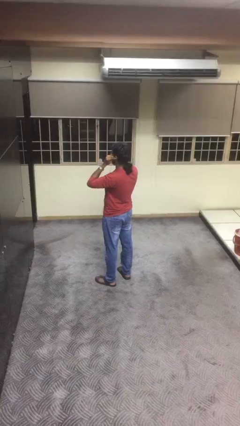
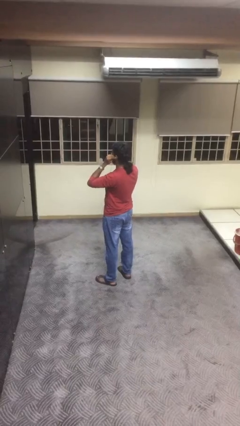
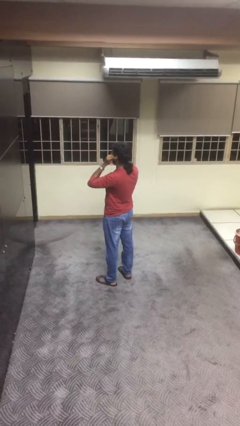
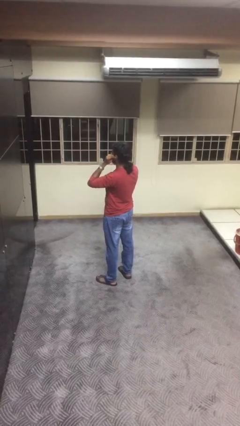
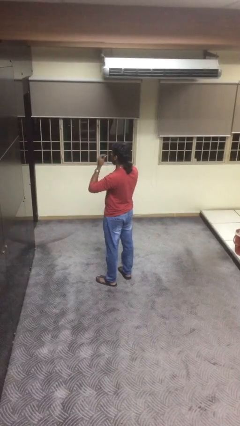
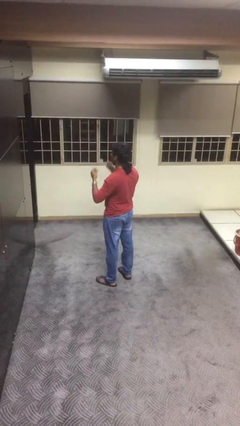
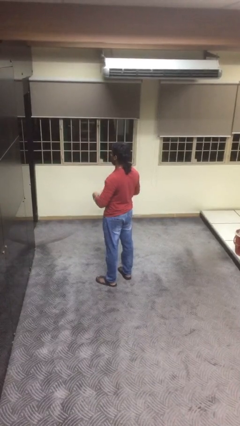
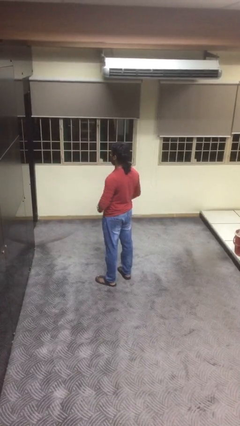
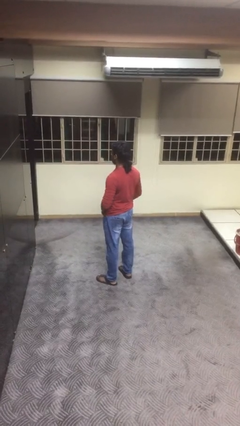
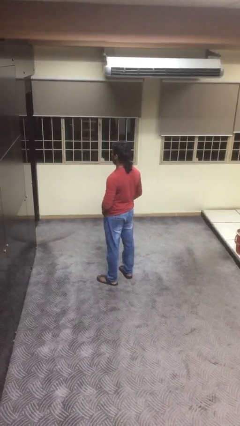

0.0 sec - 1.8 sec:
person takes off headphones

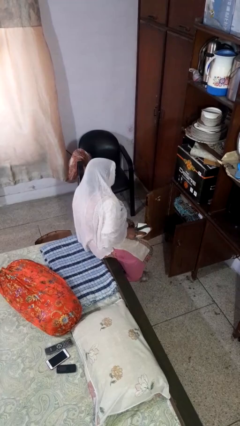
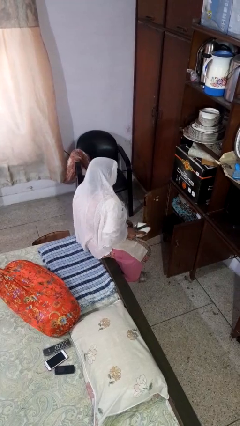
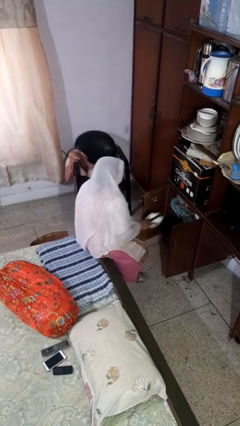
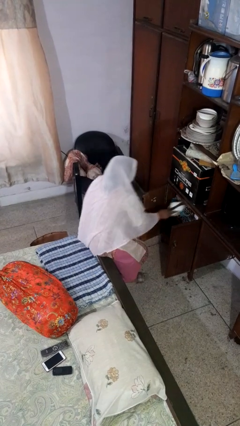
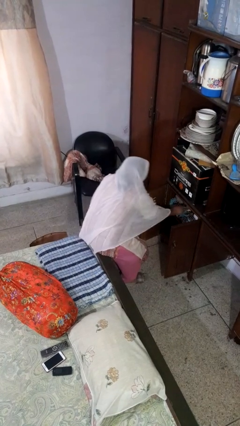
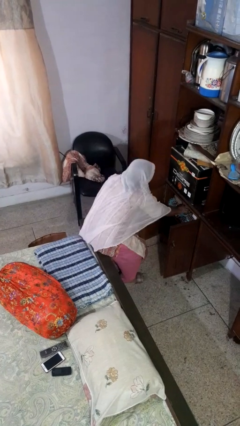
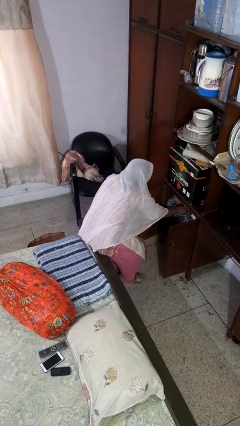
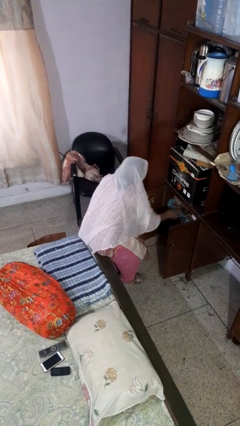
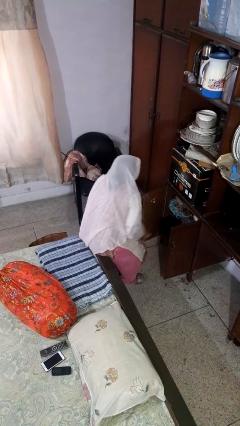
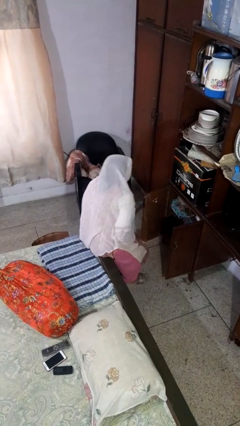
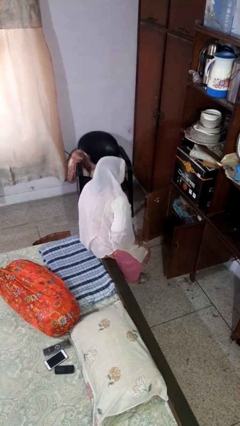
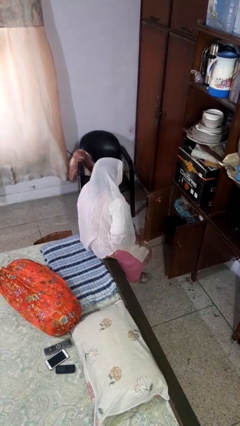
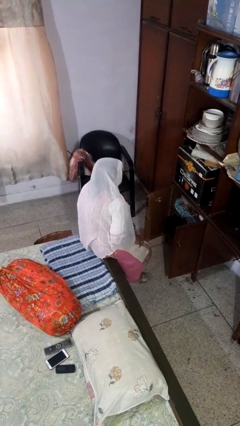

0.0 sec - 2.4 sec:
person puts object in cabinet

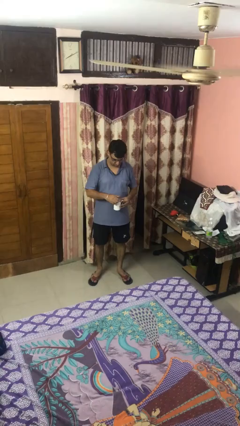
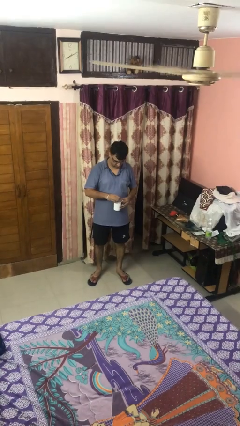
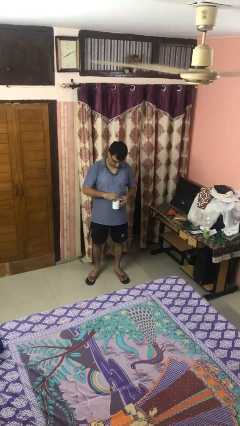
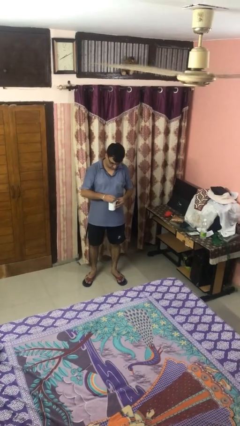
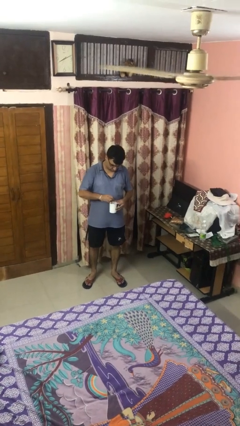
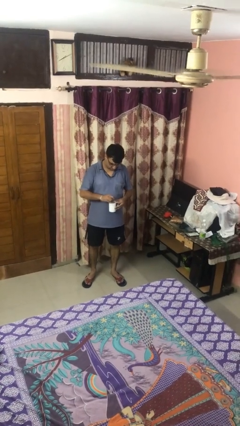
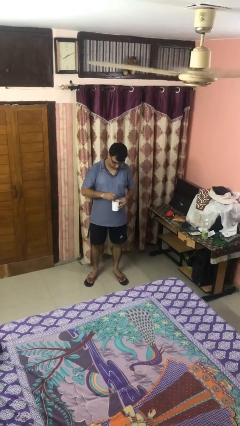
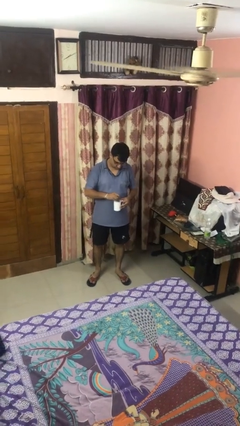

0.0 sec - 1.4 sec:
person stirs mug

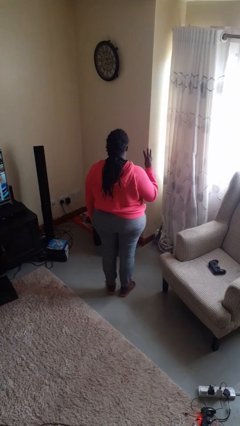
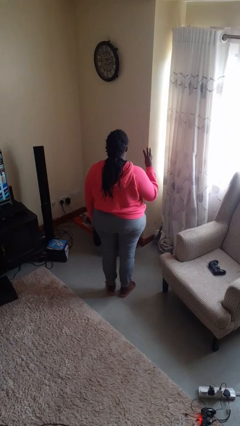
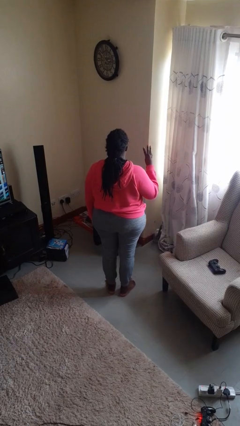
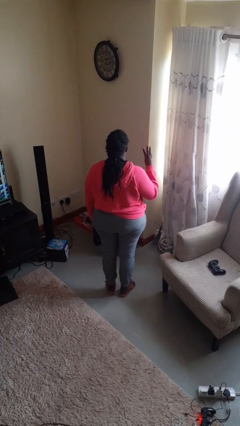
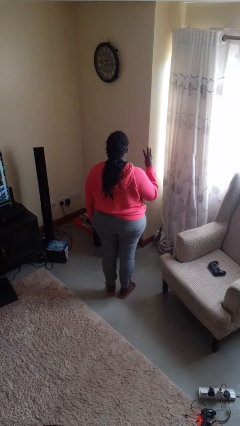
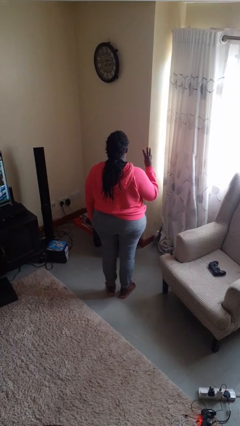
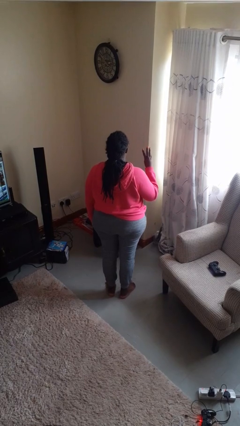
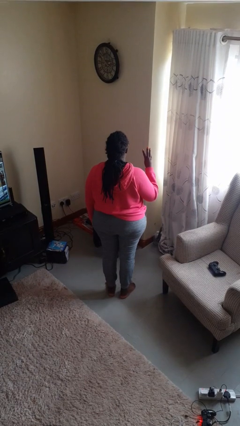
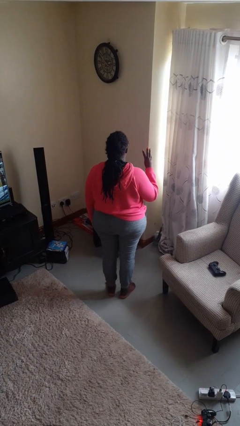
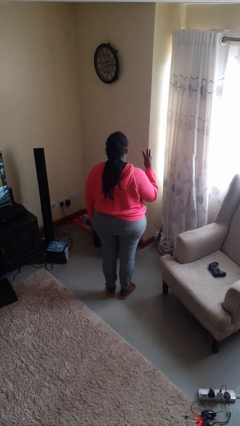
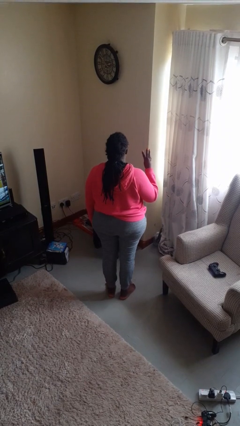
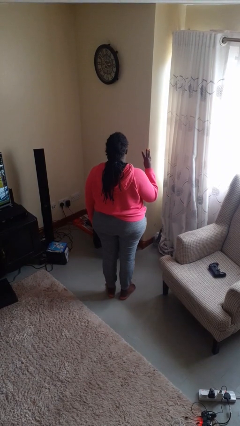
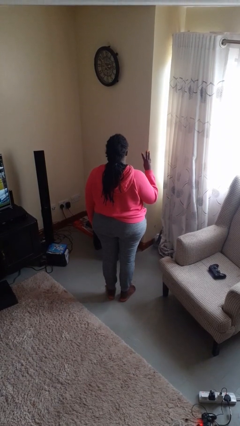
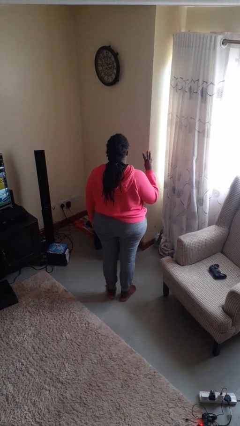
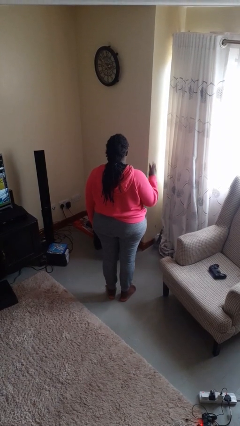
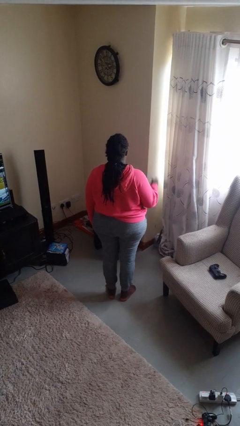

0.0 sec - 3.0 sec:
person gestures number three

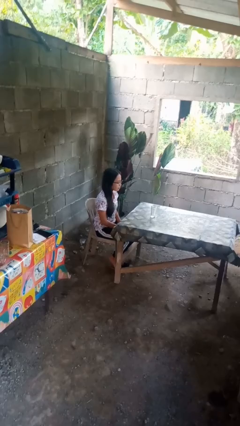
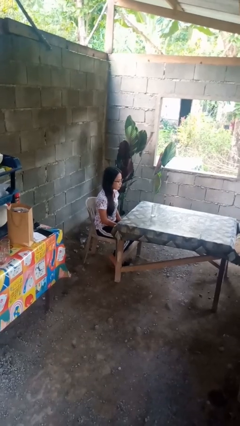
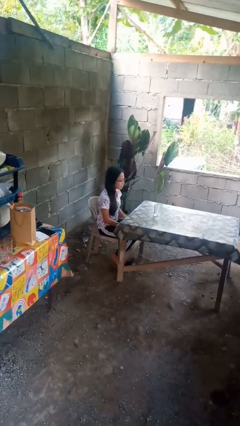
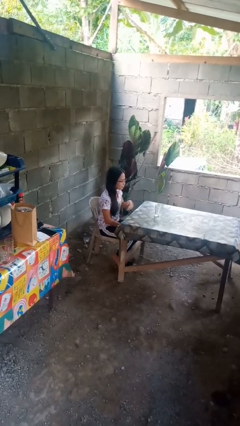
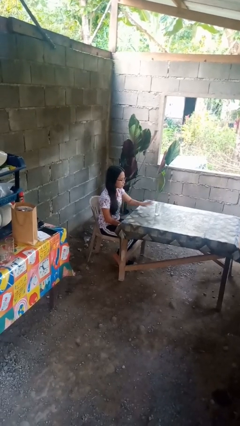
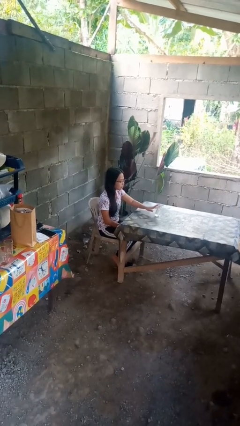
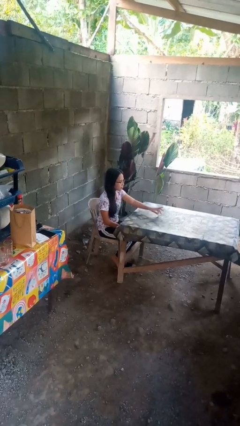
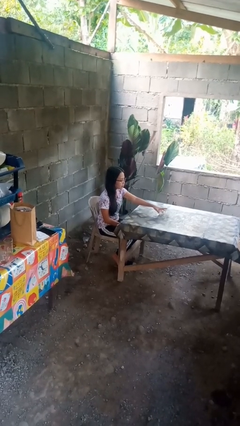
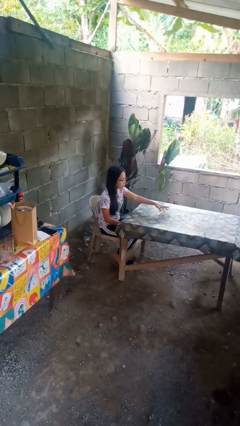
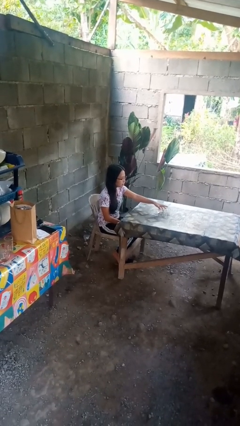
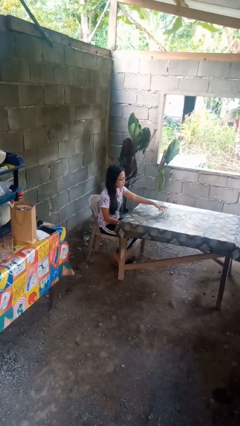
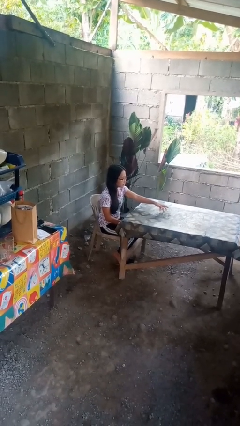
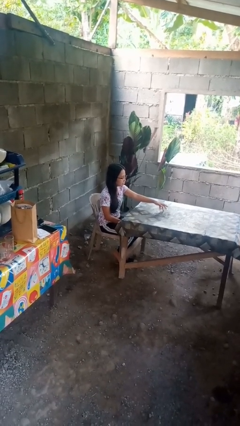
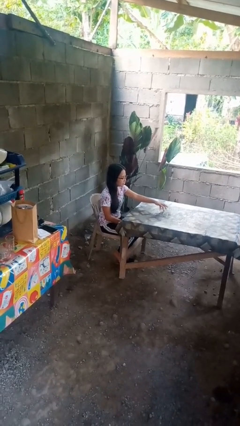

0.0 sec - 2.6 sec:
person knocks over glass

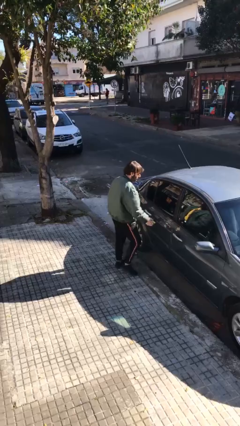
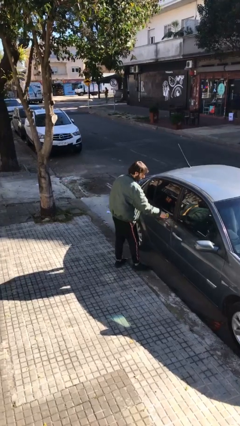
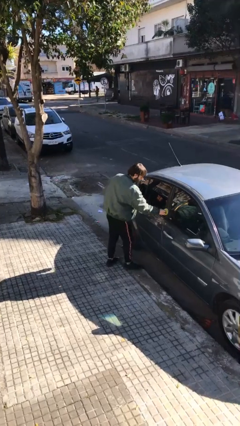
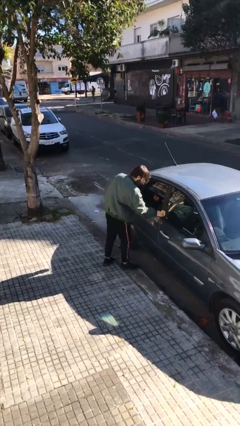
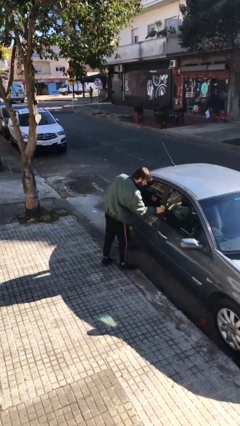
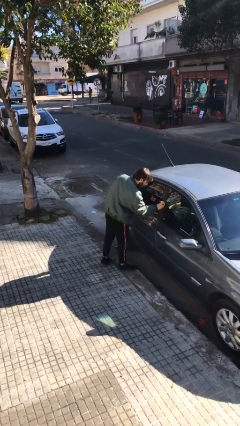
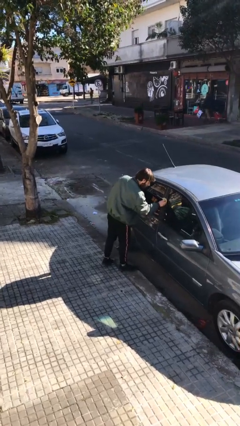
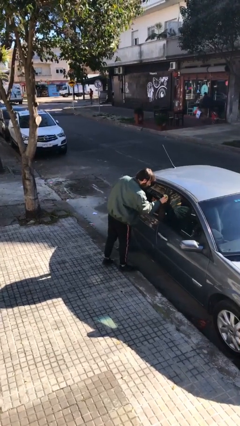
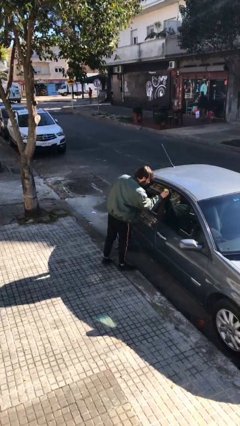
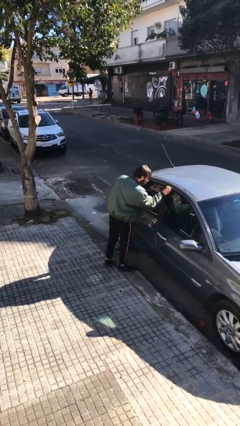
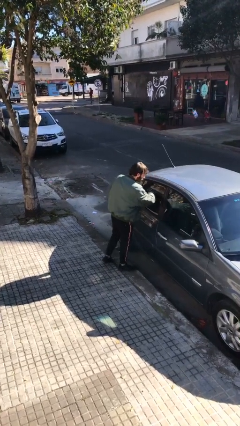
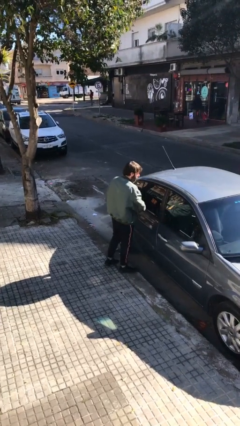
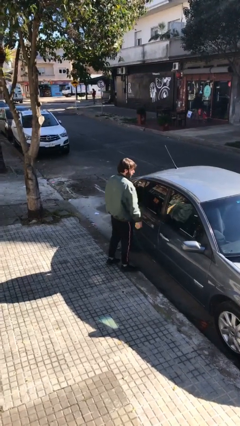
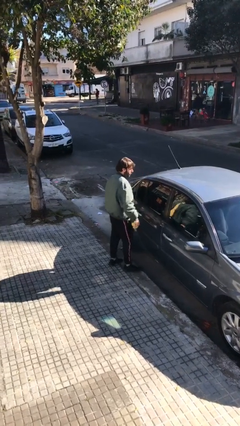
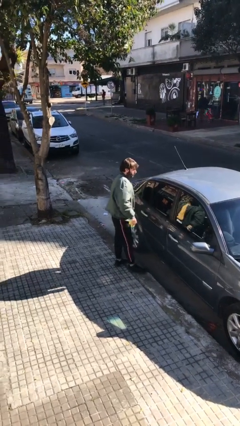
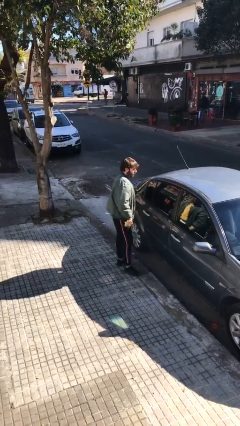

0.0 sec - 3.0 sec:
person polishes car with rag

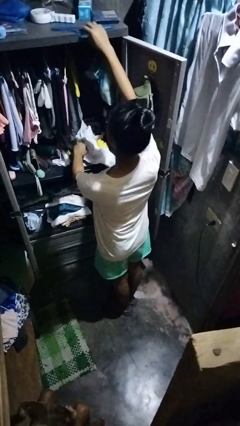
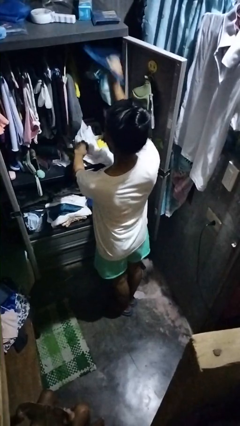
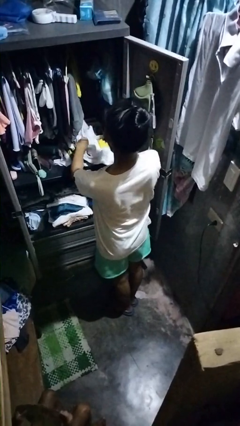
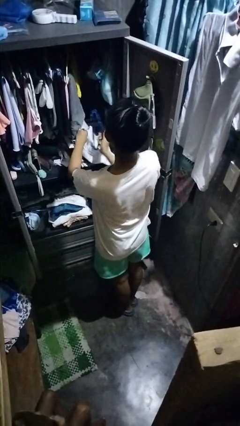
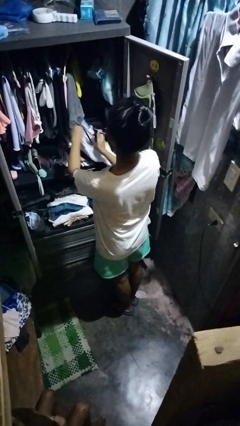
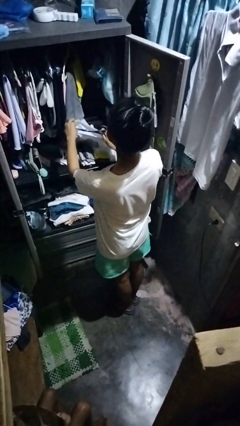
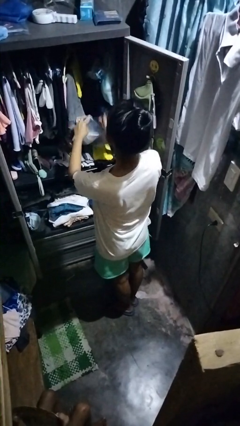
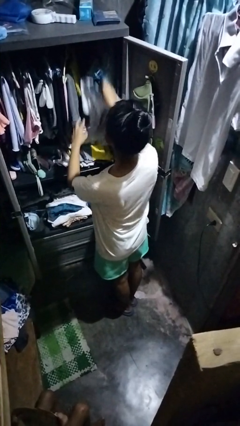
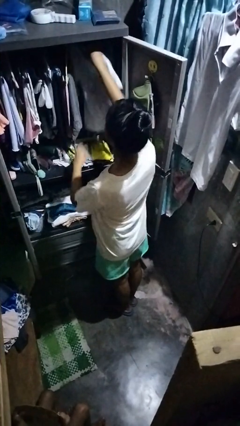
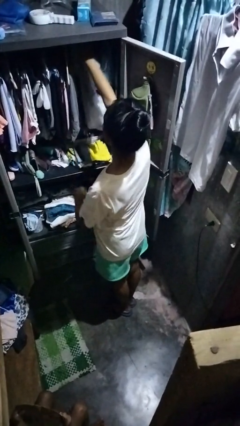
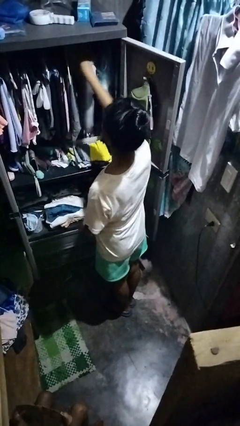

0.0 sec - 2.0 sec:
person puts clothes into closet

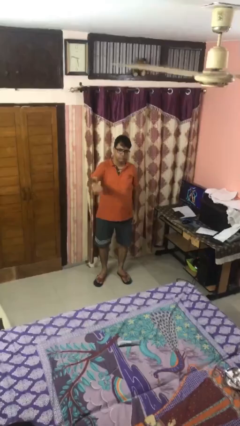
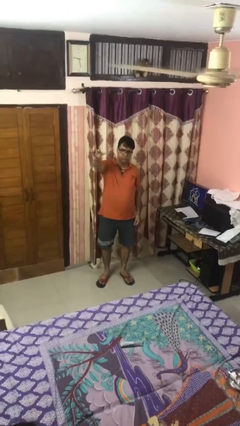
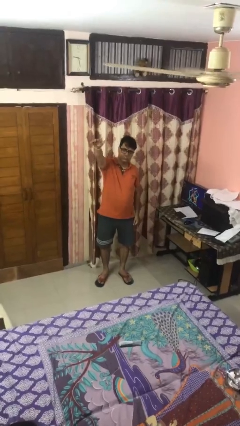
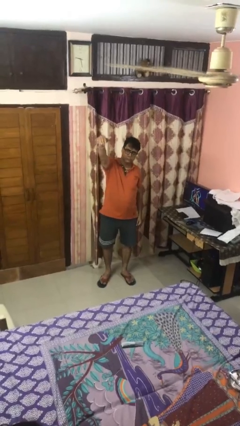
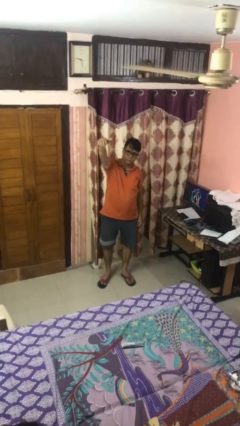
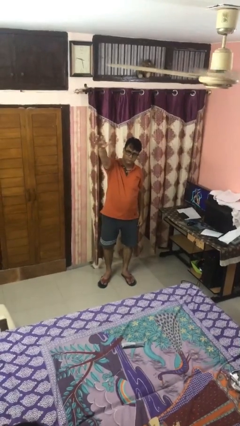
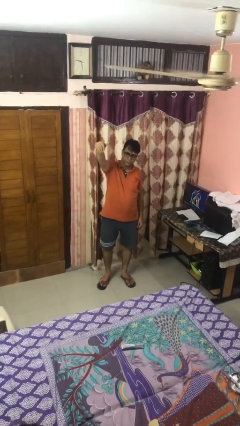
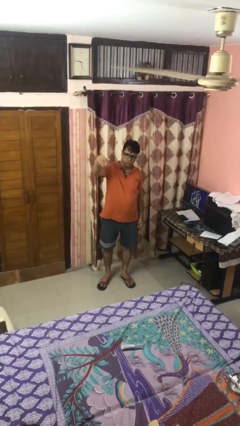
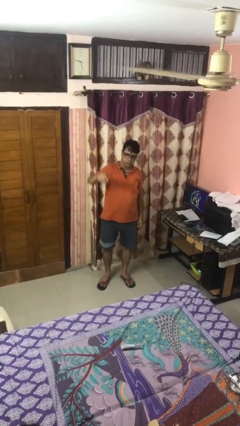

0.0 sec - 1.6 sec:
person gestures come here
